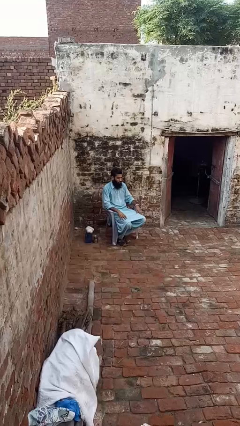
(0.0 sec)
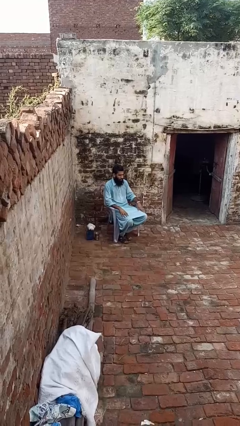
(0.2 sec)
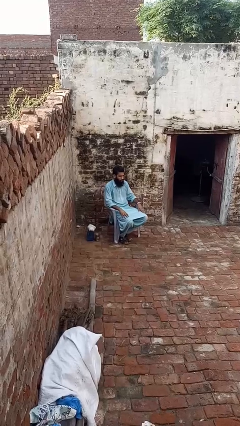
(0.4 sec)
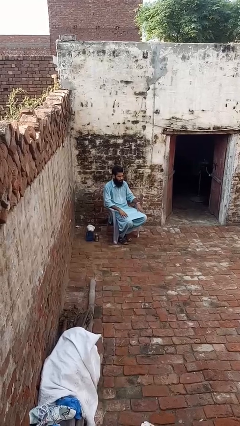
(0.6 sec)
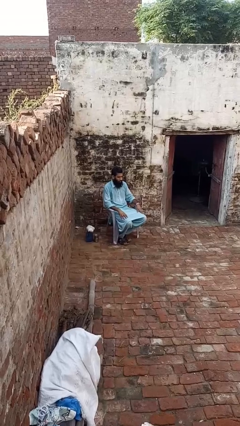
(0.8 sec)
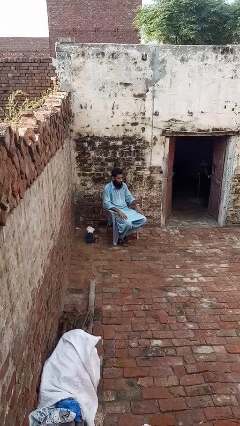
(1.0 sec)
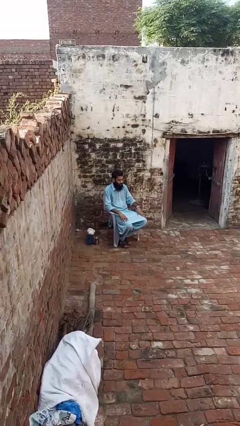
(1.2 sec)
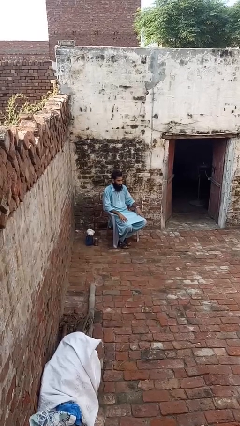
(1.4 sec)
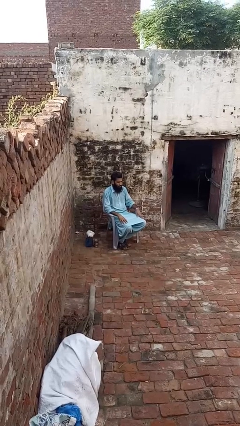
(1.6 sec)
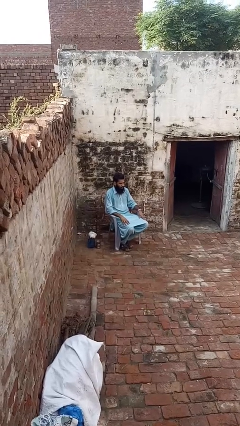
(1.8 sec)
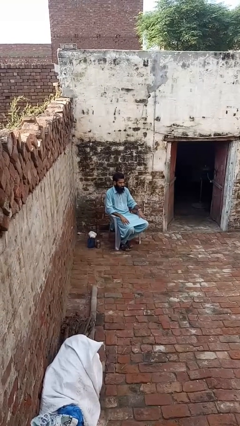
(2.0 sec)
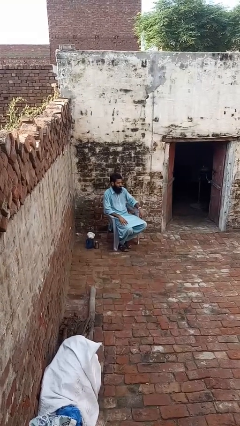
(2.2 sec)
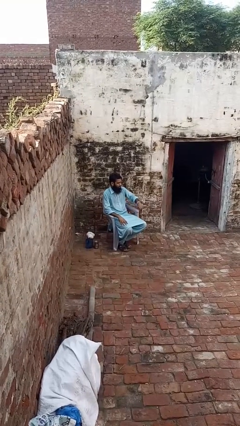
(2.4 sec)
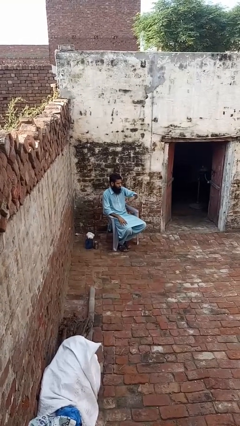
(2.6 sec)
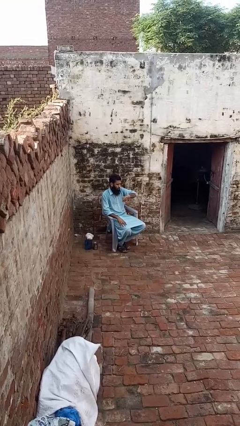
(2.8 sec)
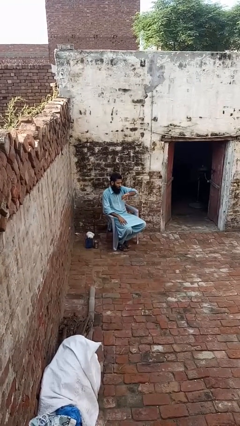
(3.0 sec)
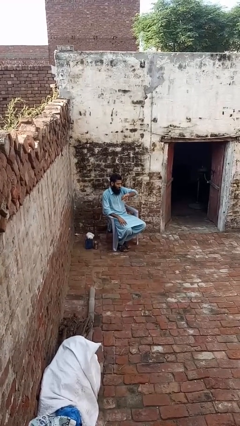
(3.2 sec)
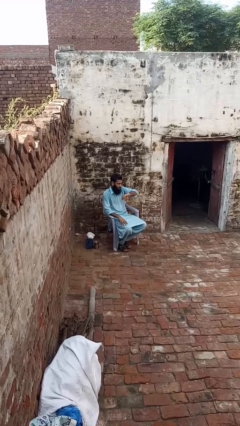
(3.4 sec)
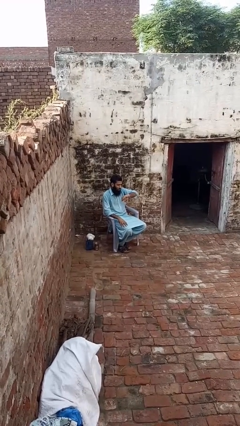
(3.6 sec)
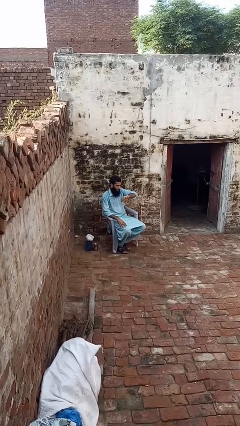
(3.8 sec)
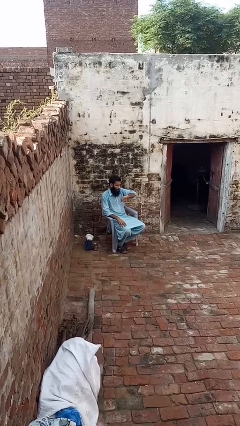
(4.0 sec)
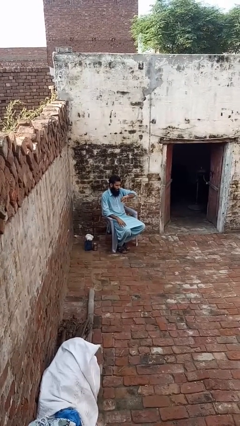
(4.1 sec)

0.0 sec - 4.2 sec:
person looks at wristwatch

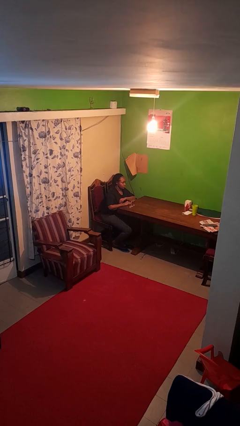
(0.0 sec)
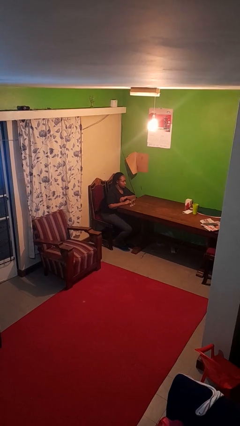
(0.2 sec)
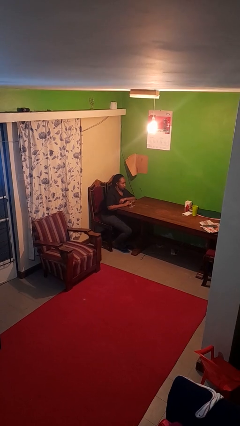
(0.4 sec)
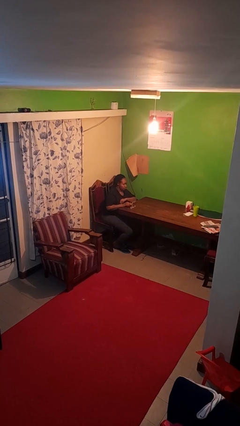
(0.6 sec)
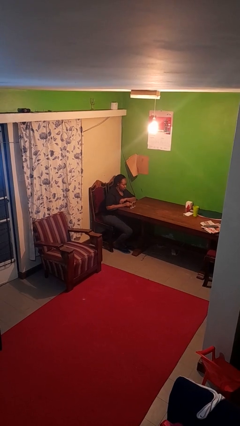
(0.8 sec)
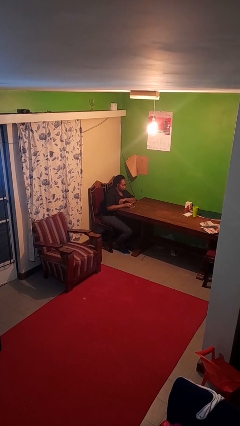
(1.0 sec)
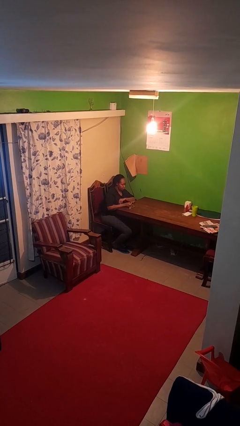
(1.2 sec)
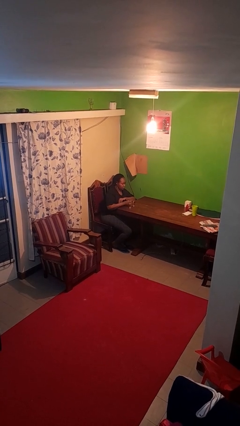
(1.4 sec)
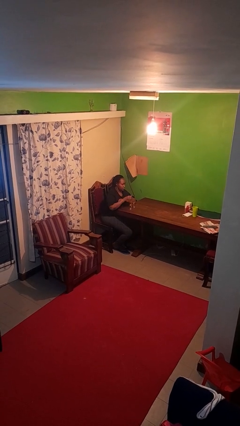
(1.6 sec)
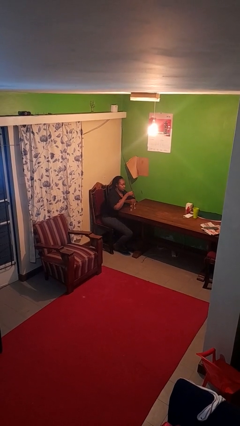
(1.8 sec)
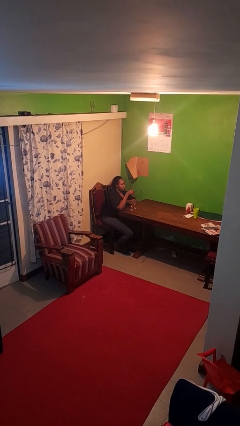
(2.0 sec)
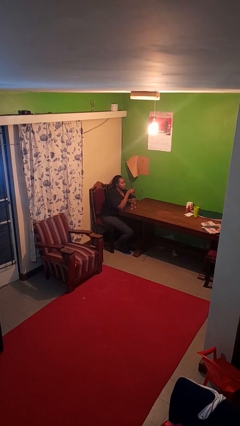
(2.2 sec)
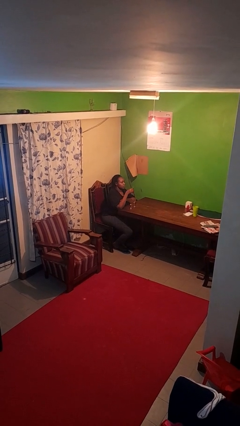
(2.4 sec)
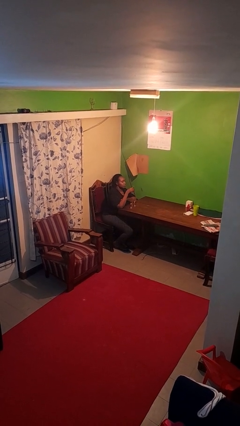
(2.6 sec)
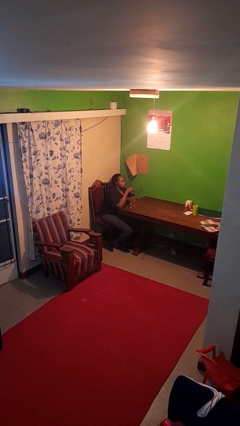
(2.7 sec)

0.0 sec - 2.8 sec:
person picks up object from table

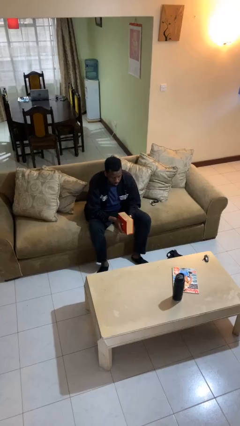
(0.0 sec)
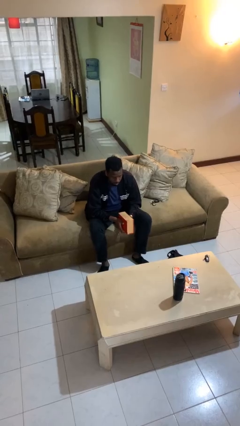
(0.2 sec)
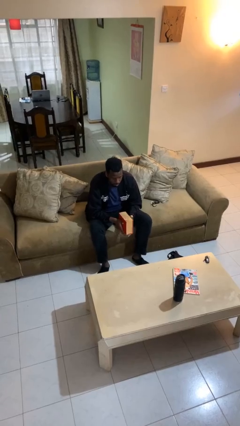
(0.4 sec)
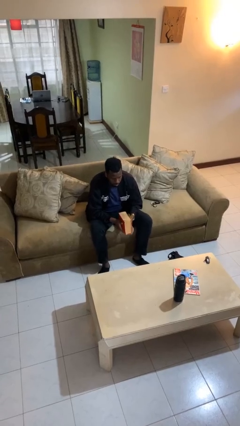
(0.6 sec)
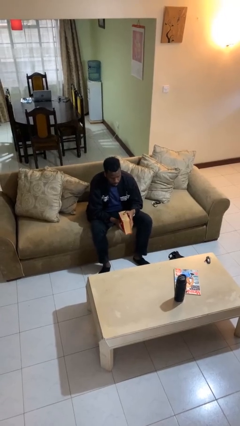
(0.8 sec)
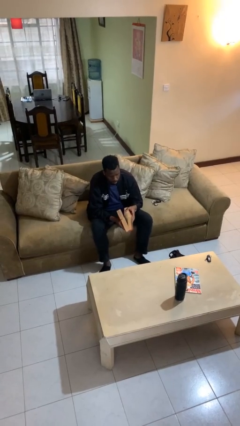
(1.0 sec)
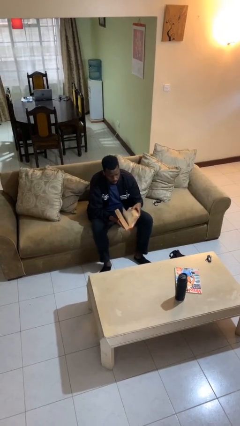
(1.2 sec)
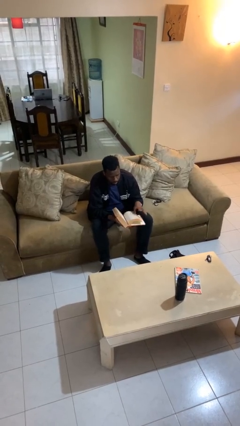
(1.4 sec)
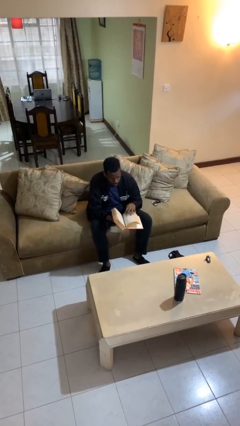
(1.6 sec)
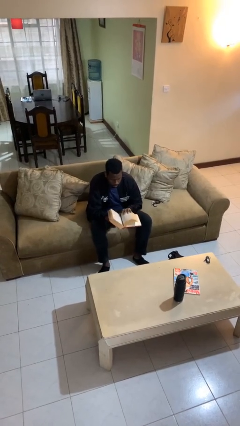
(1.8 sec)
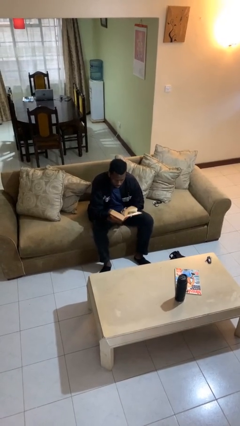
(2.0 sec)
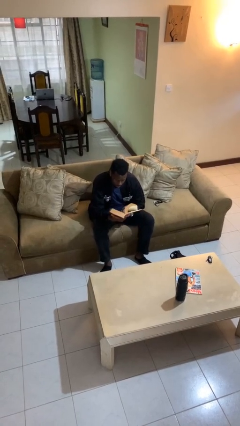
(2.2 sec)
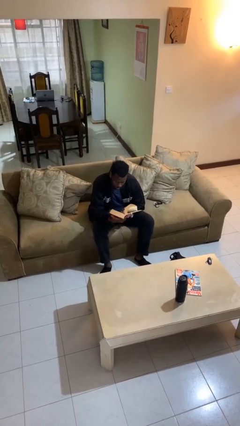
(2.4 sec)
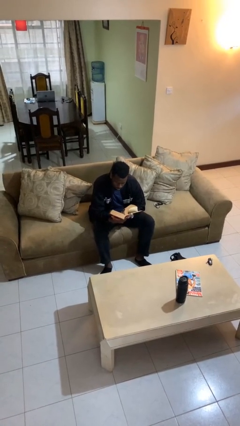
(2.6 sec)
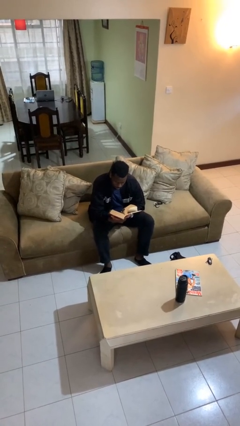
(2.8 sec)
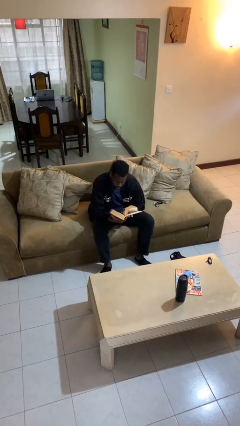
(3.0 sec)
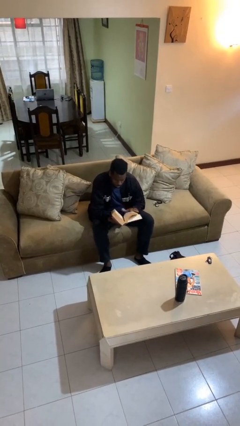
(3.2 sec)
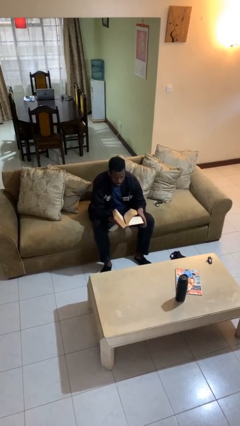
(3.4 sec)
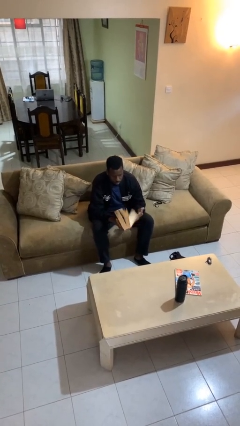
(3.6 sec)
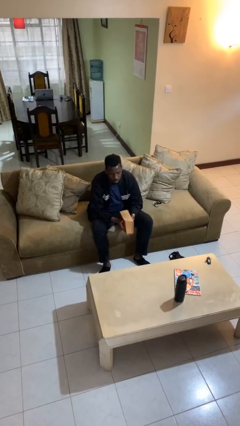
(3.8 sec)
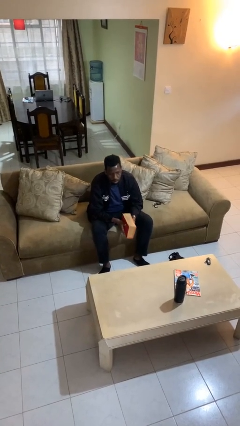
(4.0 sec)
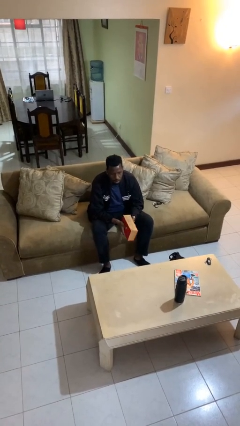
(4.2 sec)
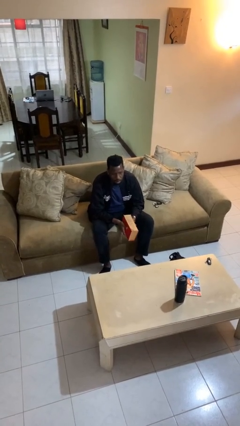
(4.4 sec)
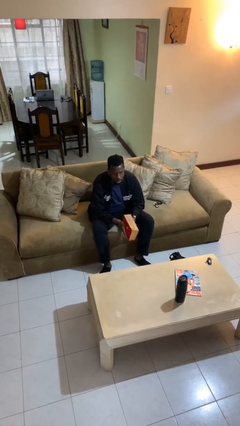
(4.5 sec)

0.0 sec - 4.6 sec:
person reads book

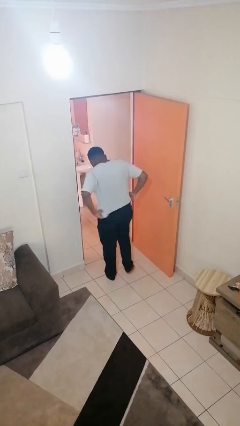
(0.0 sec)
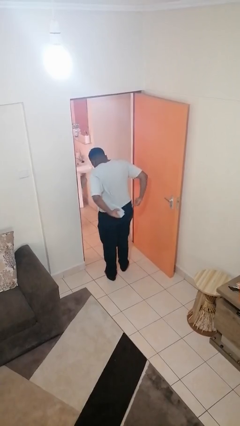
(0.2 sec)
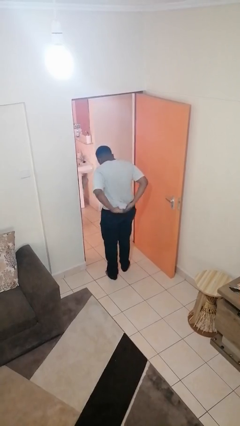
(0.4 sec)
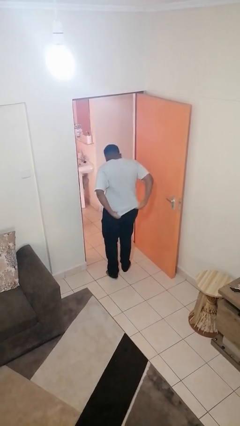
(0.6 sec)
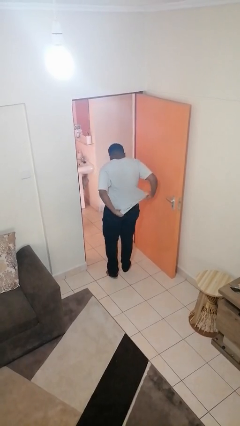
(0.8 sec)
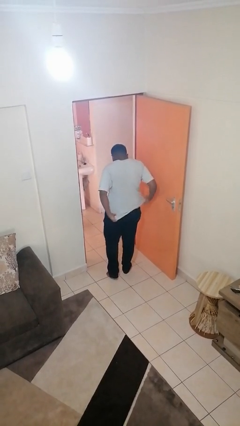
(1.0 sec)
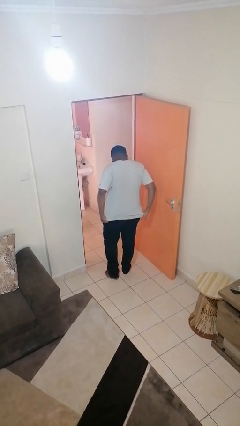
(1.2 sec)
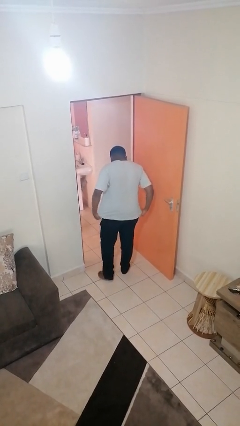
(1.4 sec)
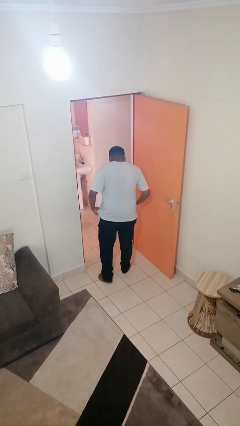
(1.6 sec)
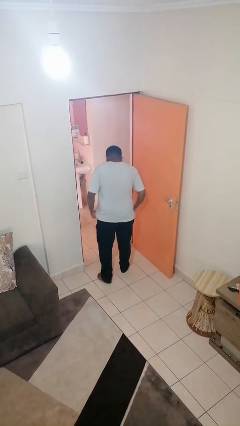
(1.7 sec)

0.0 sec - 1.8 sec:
person untucks shirt

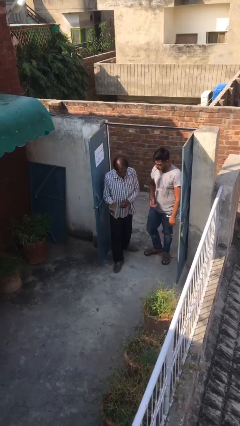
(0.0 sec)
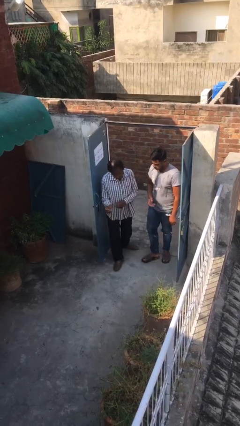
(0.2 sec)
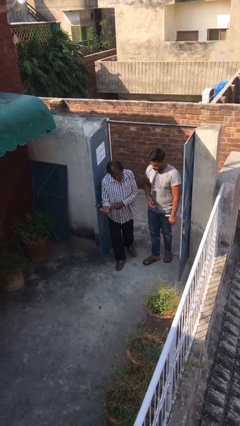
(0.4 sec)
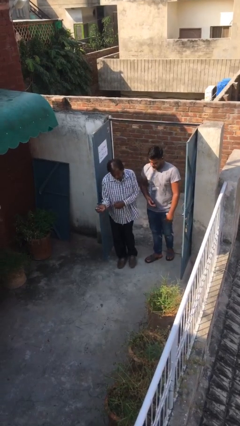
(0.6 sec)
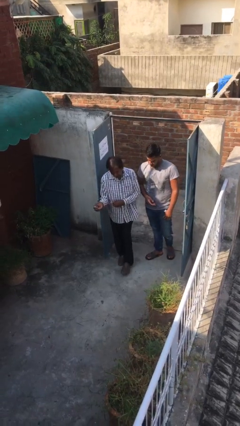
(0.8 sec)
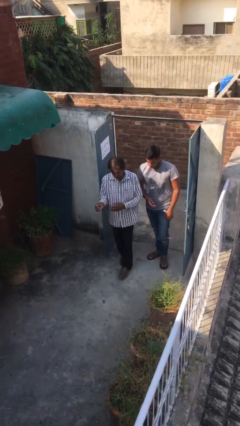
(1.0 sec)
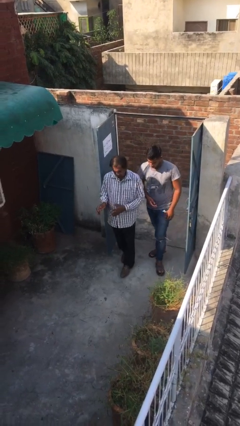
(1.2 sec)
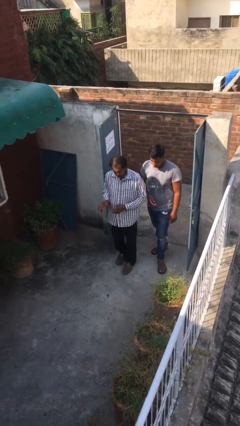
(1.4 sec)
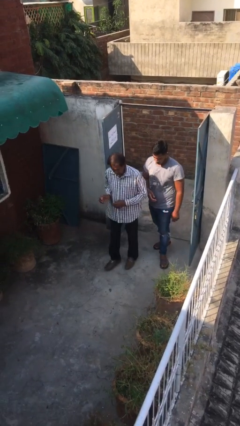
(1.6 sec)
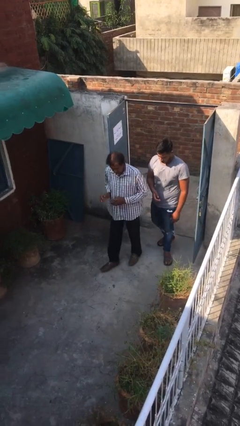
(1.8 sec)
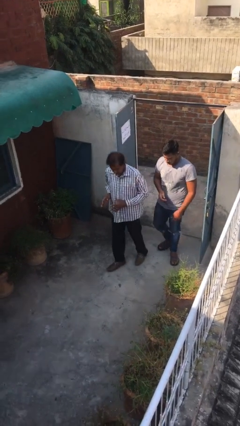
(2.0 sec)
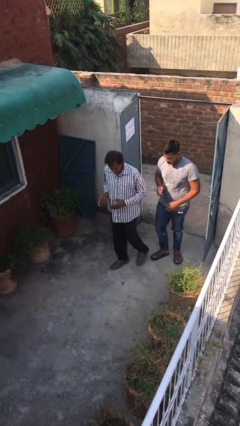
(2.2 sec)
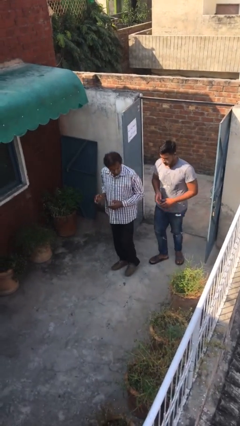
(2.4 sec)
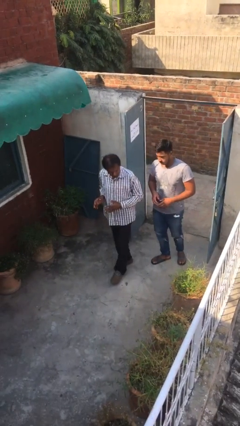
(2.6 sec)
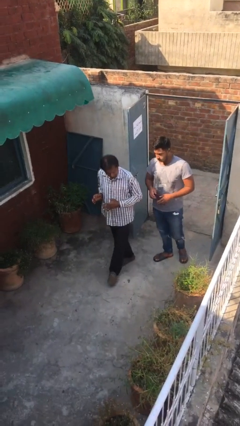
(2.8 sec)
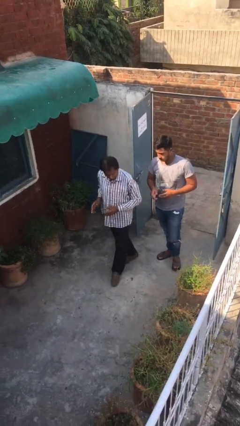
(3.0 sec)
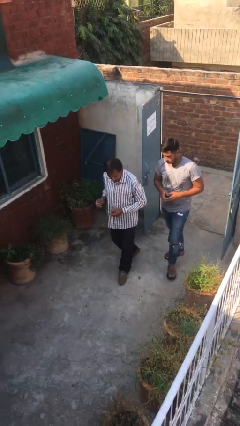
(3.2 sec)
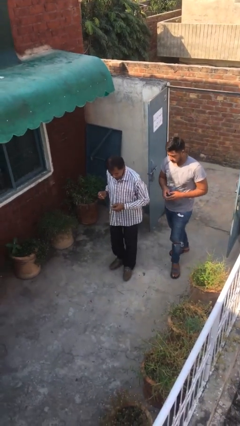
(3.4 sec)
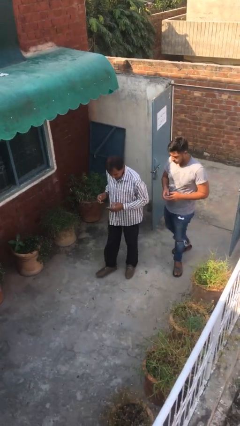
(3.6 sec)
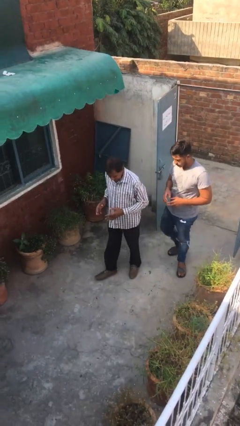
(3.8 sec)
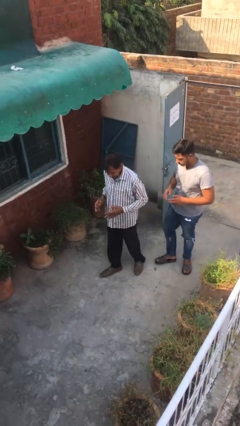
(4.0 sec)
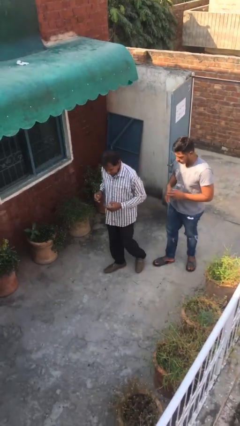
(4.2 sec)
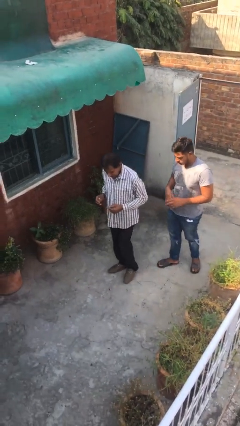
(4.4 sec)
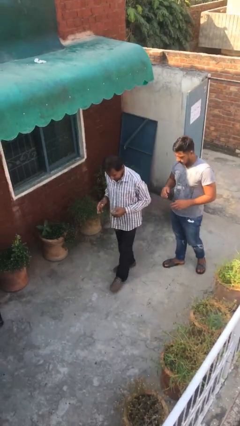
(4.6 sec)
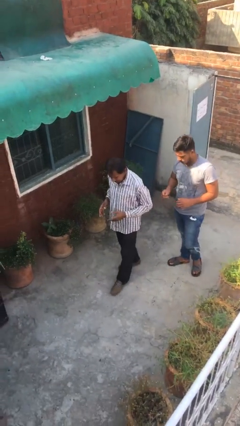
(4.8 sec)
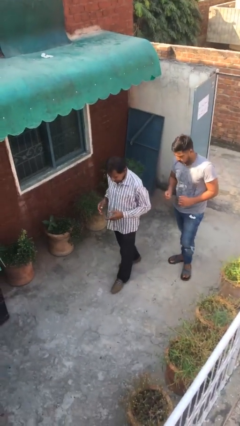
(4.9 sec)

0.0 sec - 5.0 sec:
person talks to person
